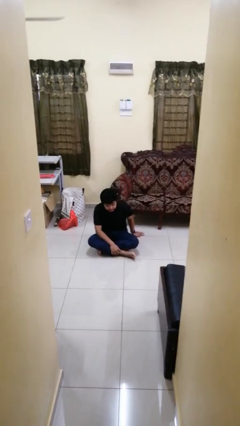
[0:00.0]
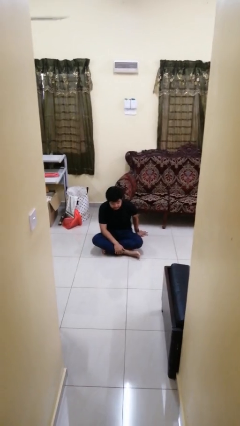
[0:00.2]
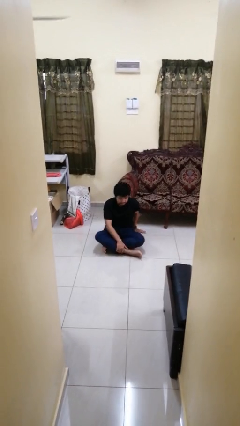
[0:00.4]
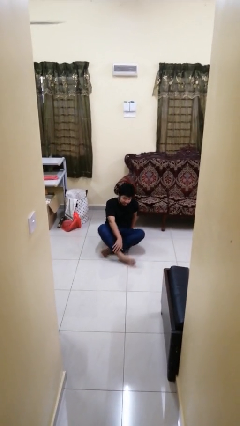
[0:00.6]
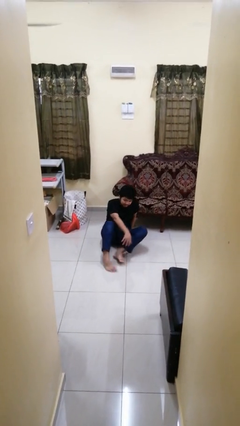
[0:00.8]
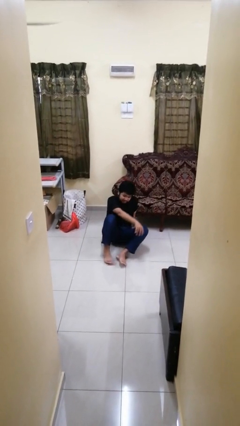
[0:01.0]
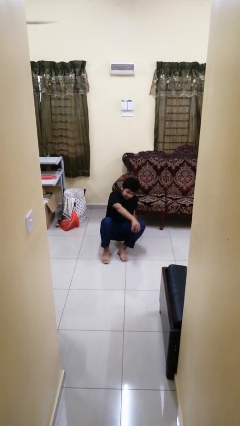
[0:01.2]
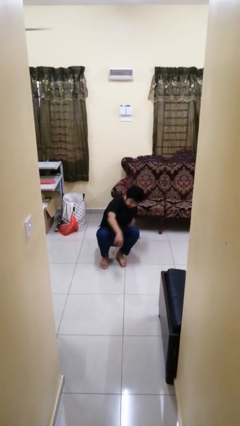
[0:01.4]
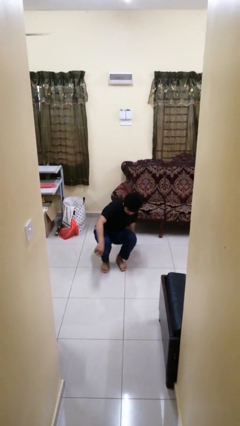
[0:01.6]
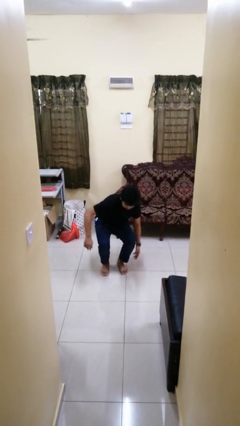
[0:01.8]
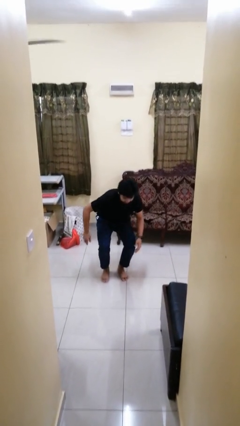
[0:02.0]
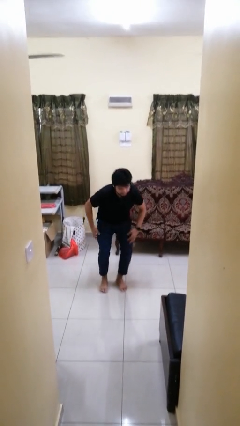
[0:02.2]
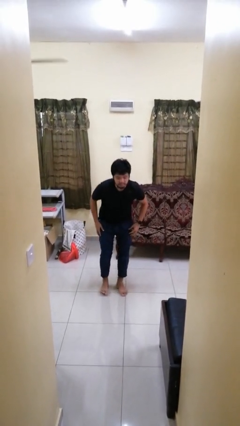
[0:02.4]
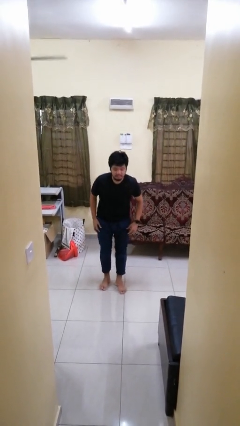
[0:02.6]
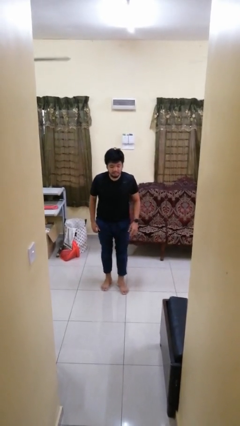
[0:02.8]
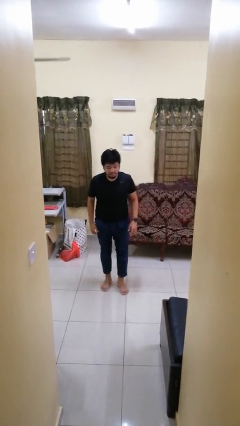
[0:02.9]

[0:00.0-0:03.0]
person stands up from floor

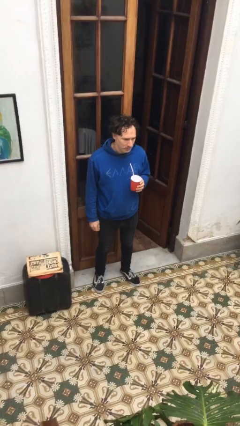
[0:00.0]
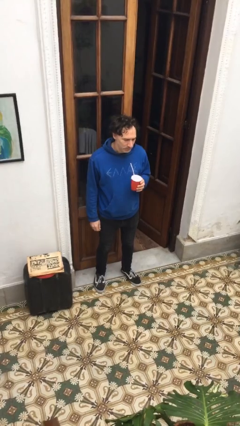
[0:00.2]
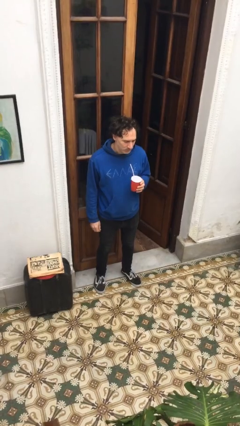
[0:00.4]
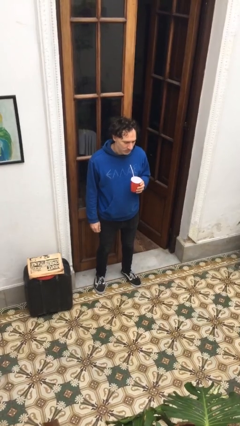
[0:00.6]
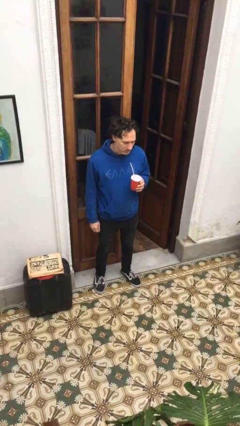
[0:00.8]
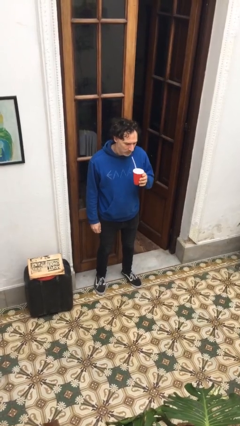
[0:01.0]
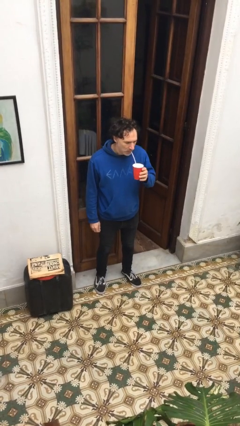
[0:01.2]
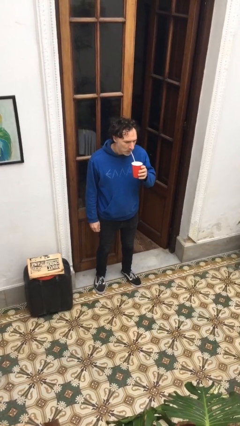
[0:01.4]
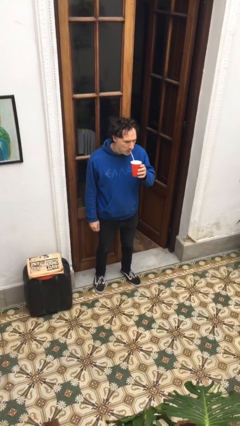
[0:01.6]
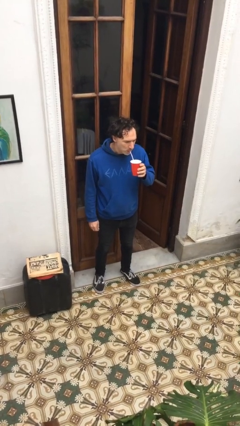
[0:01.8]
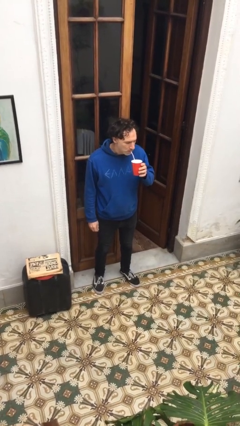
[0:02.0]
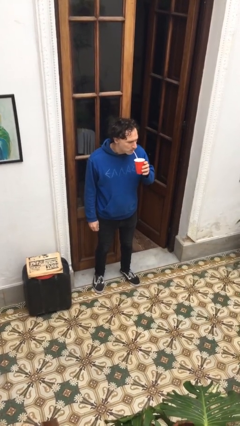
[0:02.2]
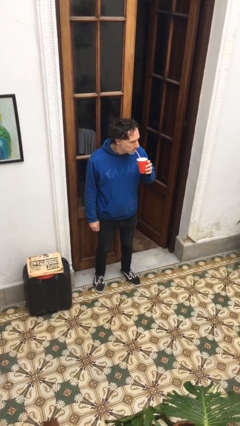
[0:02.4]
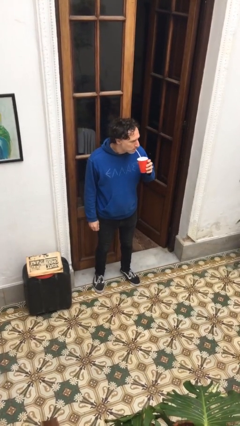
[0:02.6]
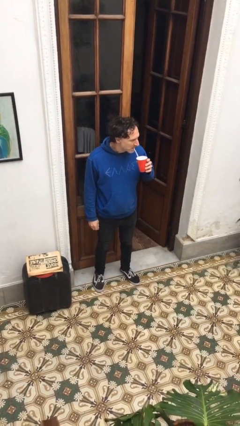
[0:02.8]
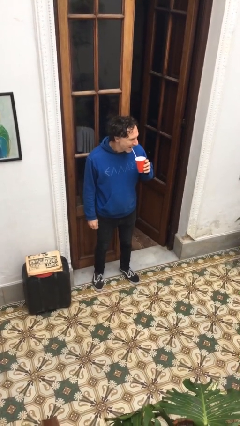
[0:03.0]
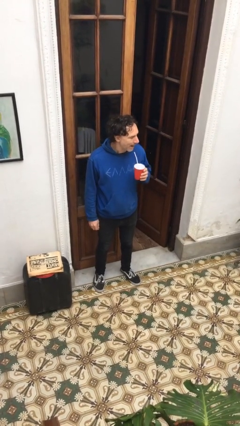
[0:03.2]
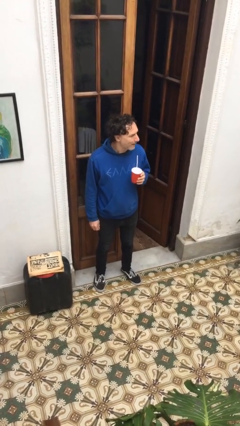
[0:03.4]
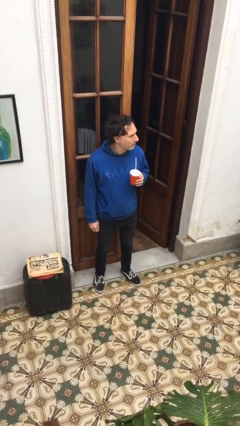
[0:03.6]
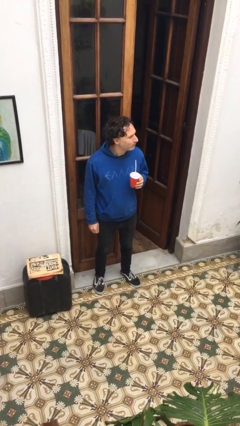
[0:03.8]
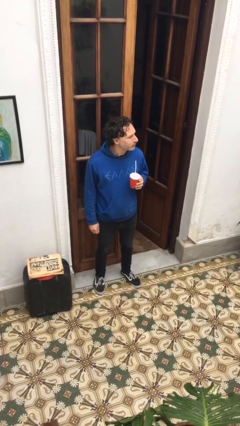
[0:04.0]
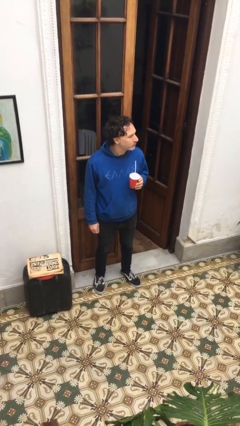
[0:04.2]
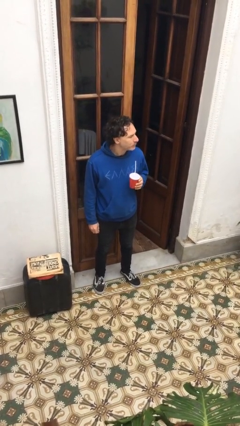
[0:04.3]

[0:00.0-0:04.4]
person drinks from straw

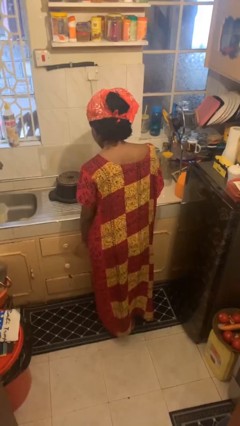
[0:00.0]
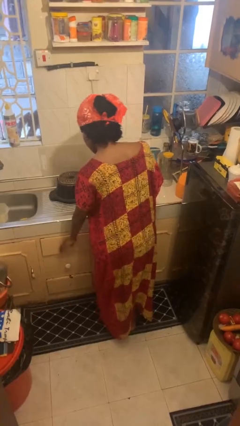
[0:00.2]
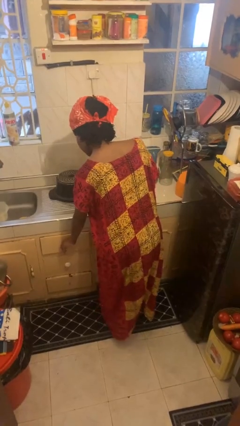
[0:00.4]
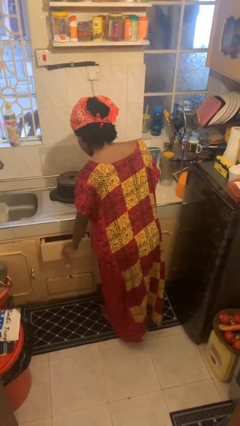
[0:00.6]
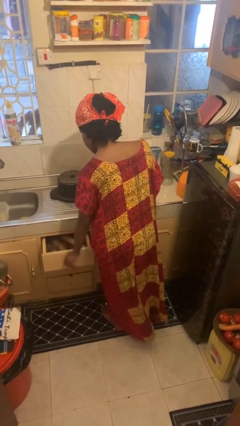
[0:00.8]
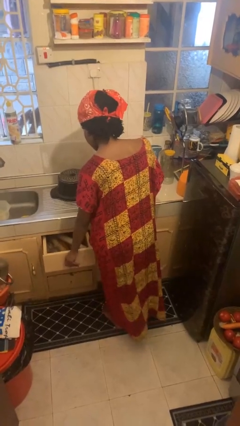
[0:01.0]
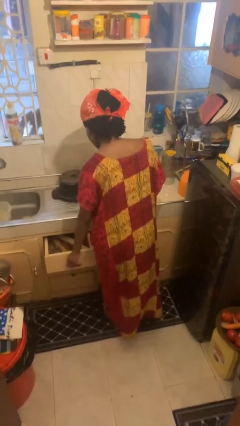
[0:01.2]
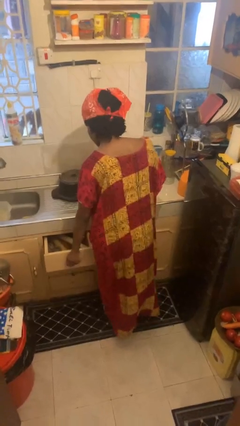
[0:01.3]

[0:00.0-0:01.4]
person opens kitchen drawer

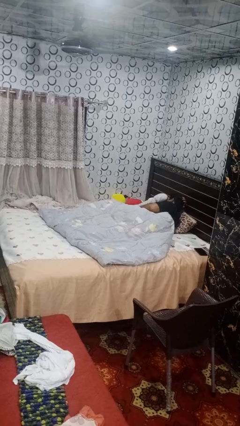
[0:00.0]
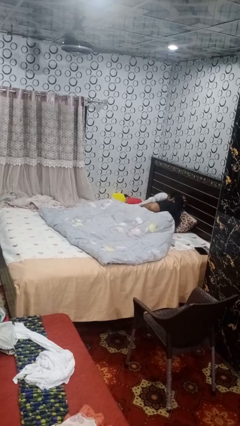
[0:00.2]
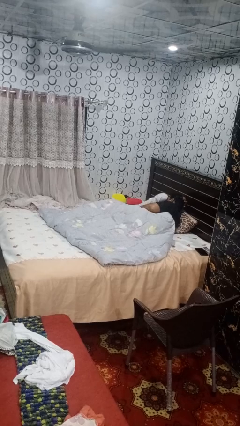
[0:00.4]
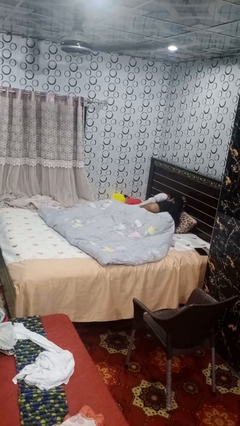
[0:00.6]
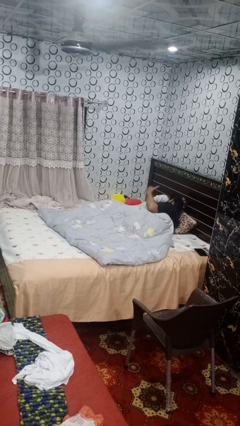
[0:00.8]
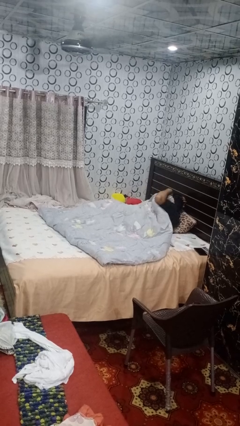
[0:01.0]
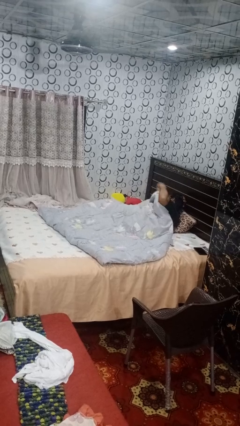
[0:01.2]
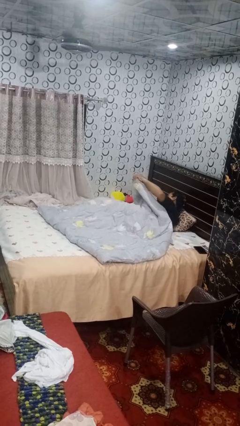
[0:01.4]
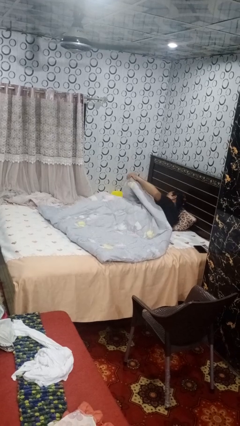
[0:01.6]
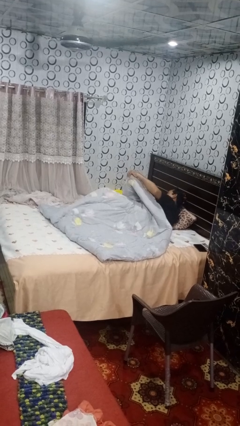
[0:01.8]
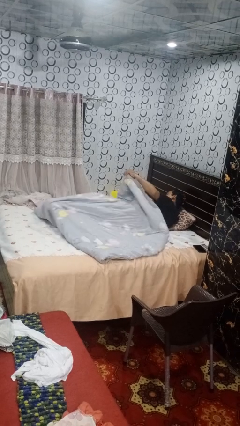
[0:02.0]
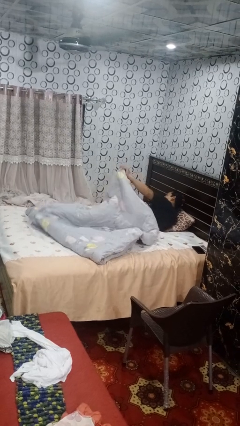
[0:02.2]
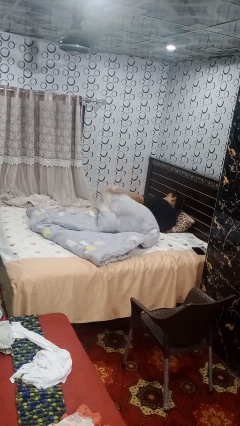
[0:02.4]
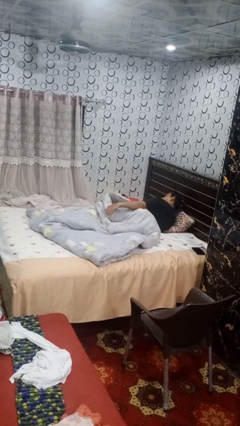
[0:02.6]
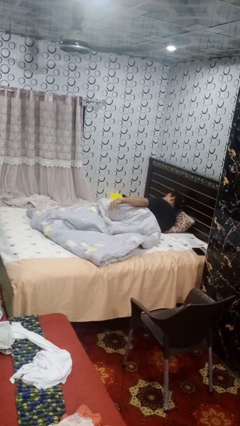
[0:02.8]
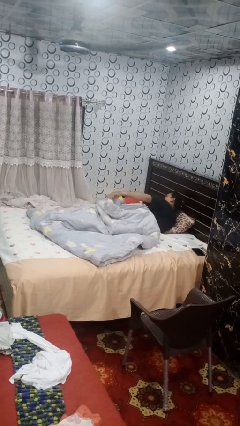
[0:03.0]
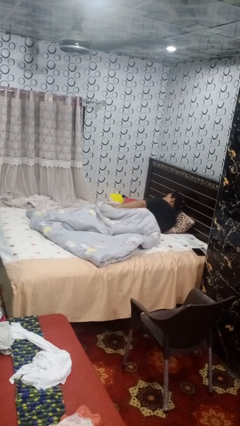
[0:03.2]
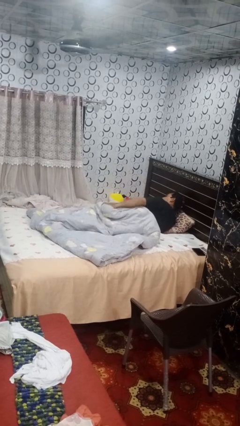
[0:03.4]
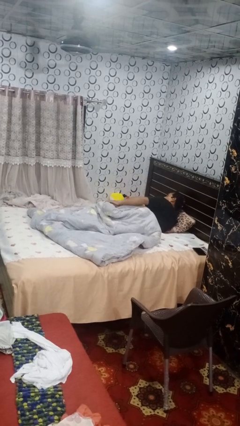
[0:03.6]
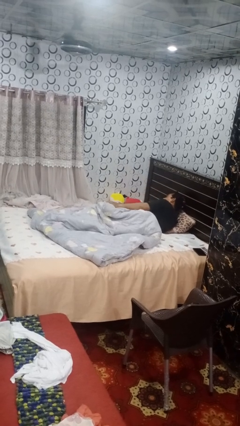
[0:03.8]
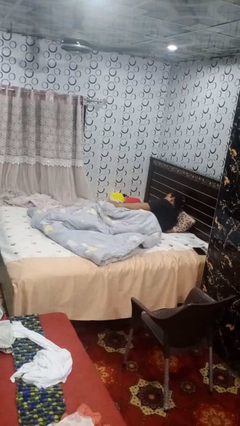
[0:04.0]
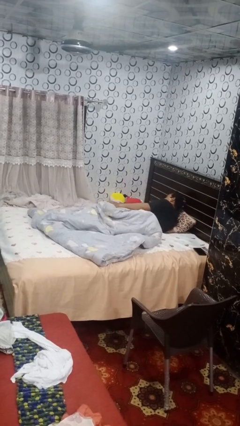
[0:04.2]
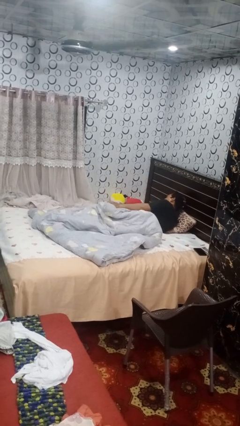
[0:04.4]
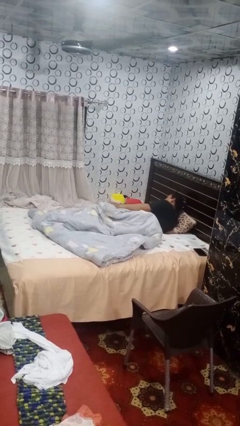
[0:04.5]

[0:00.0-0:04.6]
person uncovers with blanket

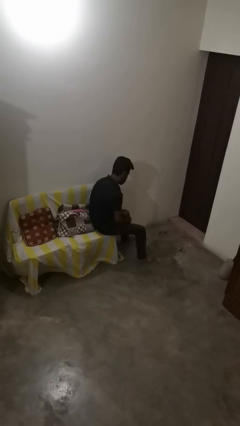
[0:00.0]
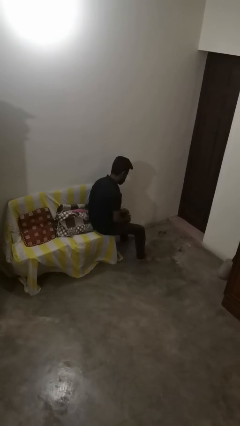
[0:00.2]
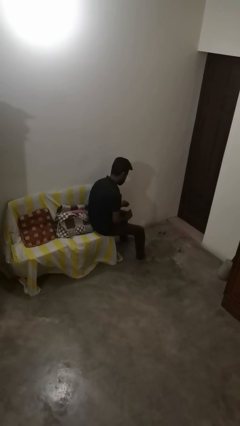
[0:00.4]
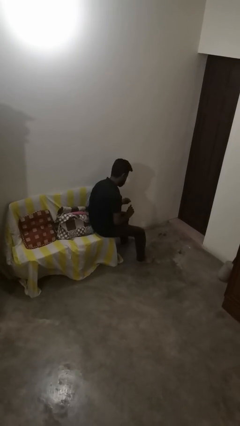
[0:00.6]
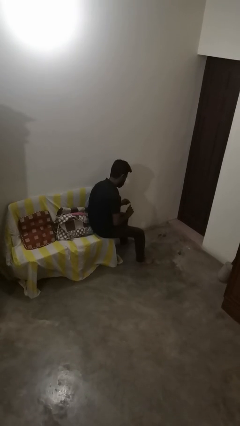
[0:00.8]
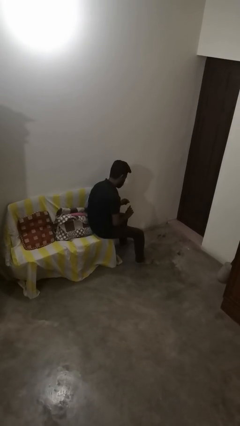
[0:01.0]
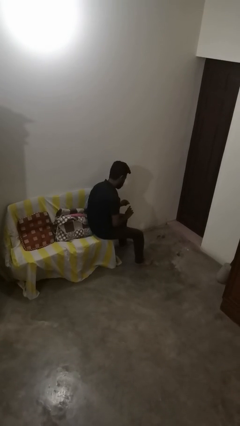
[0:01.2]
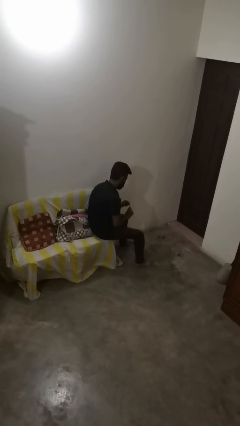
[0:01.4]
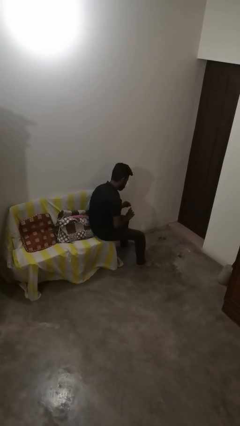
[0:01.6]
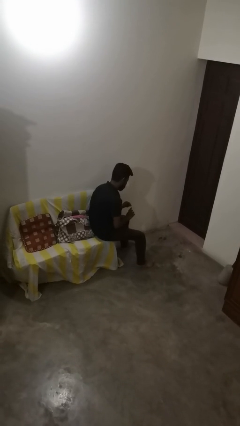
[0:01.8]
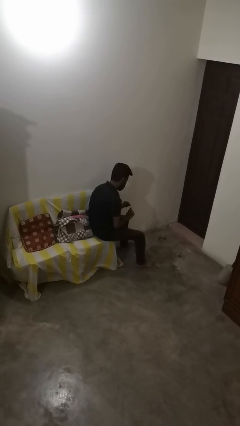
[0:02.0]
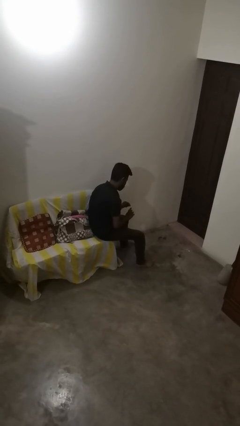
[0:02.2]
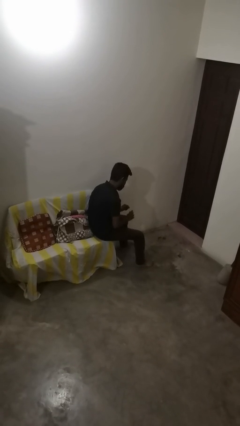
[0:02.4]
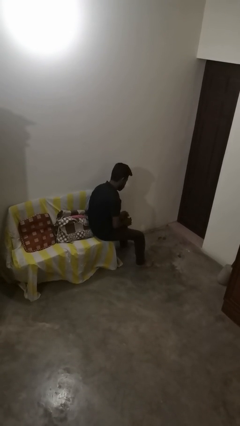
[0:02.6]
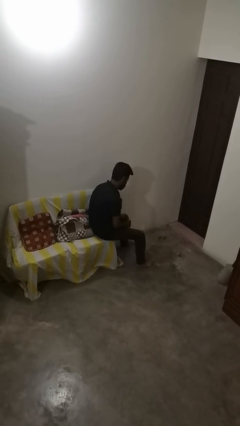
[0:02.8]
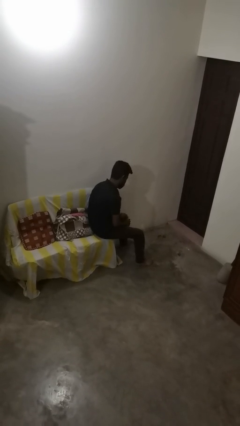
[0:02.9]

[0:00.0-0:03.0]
person paints fingernails

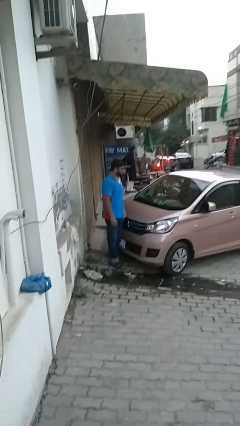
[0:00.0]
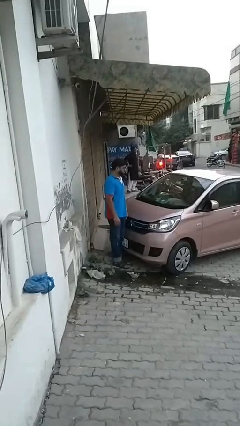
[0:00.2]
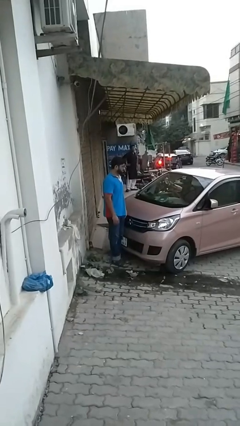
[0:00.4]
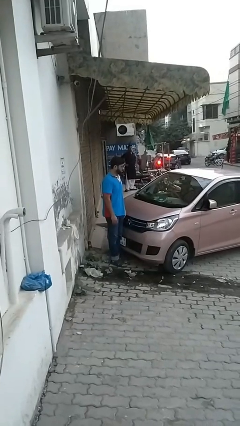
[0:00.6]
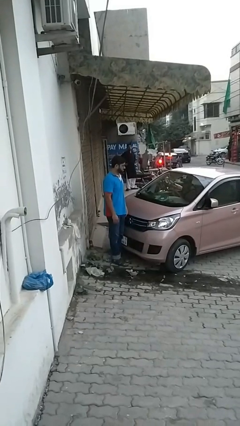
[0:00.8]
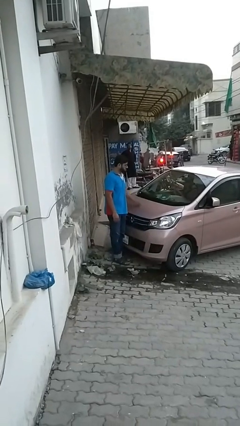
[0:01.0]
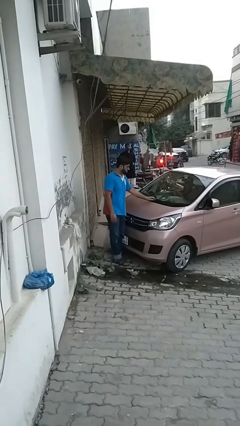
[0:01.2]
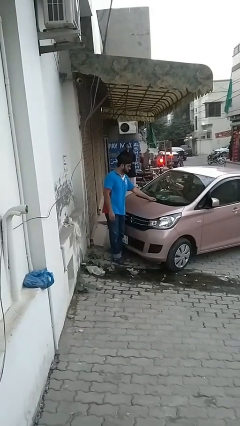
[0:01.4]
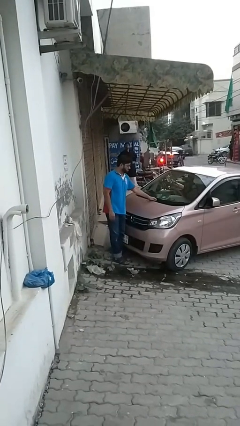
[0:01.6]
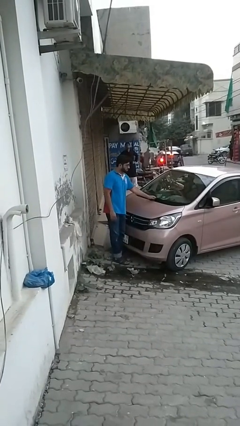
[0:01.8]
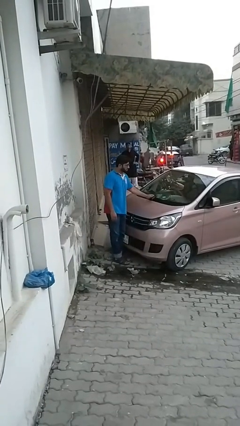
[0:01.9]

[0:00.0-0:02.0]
person flips up car wipers
